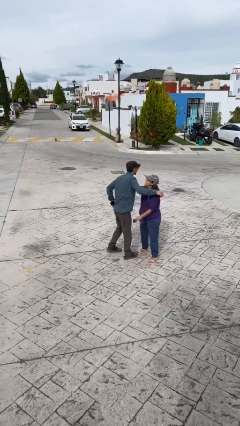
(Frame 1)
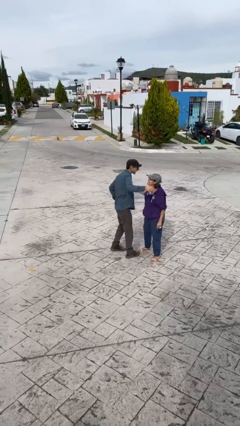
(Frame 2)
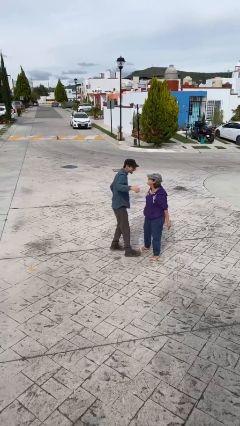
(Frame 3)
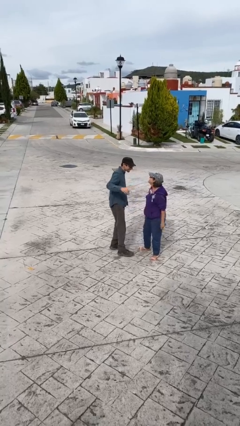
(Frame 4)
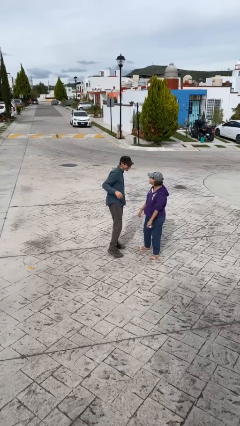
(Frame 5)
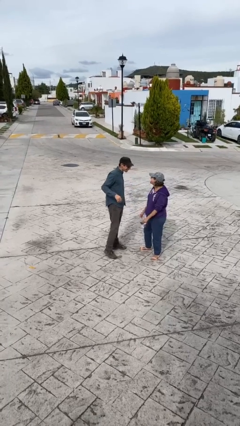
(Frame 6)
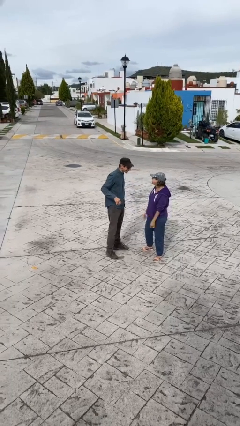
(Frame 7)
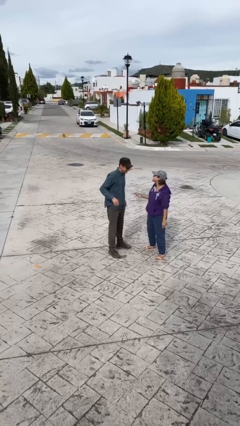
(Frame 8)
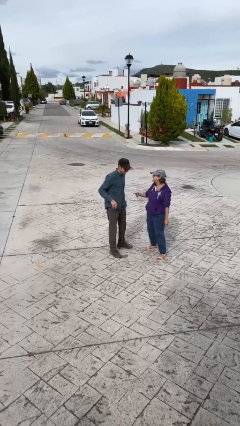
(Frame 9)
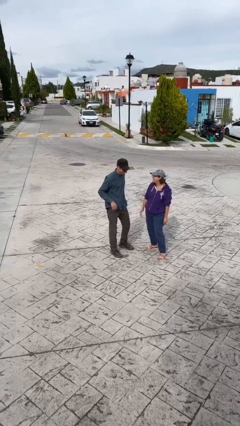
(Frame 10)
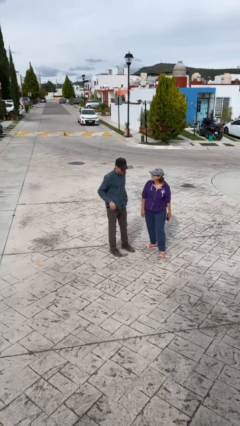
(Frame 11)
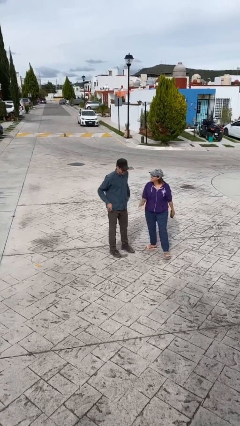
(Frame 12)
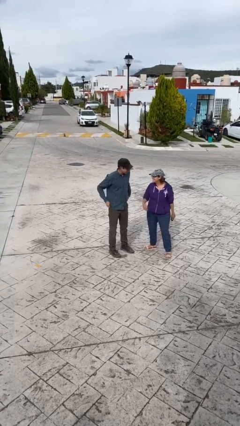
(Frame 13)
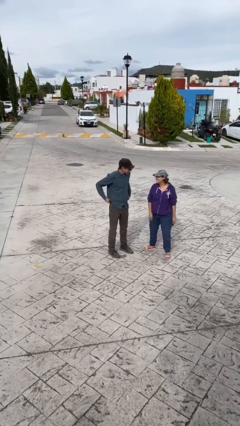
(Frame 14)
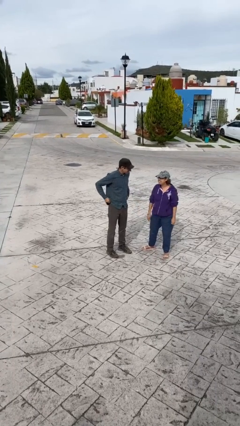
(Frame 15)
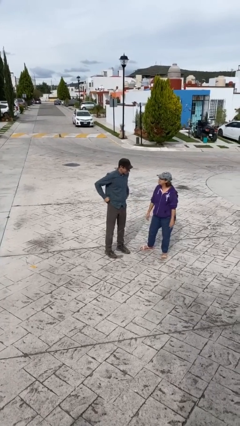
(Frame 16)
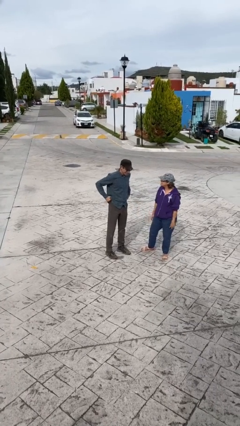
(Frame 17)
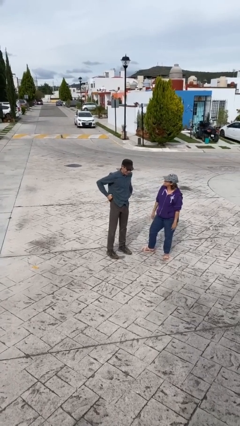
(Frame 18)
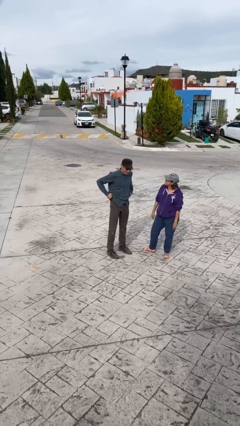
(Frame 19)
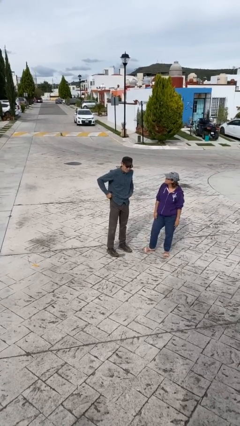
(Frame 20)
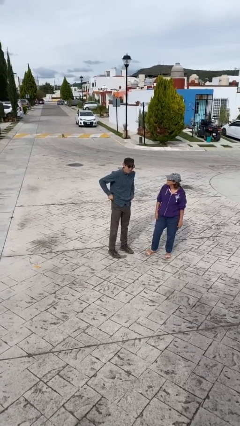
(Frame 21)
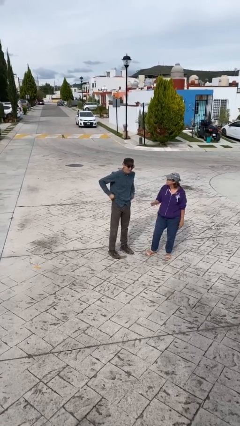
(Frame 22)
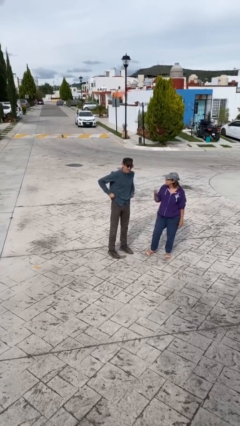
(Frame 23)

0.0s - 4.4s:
person talks to person

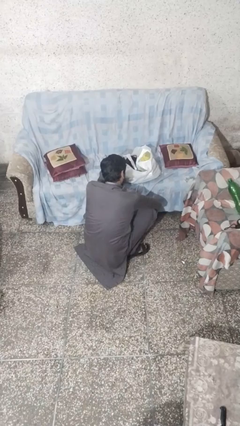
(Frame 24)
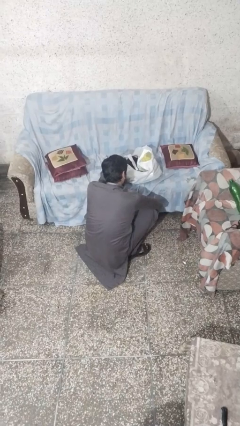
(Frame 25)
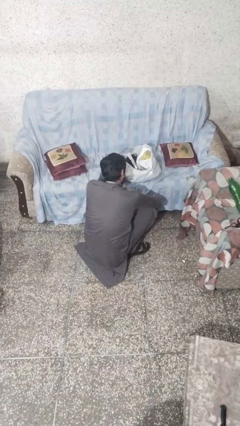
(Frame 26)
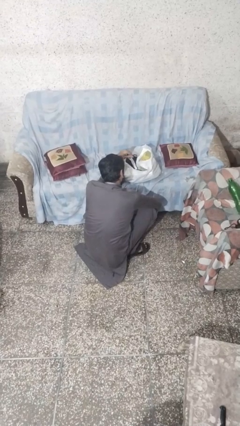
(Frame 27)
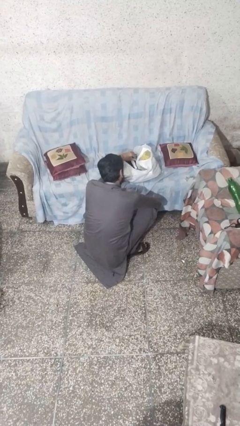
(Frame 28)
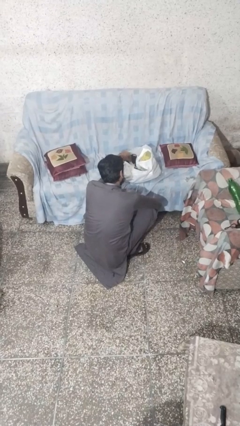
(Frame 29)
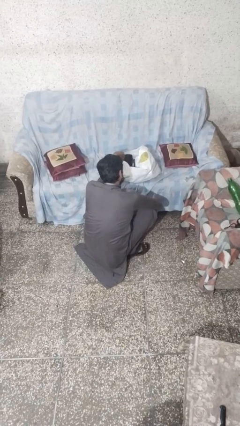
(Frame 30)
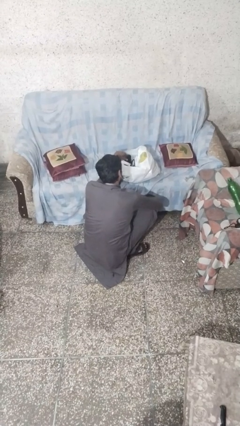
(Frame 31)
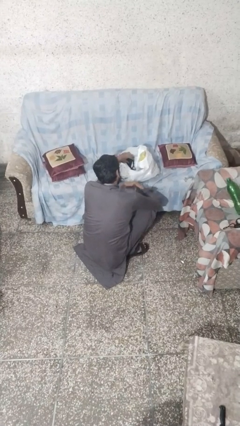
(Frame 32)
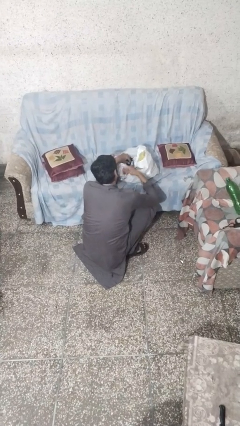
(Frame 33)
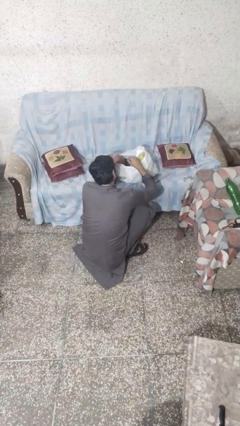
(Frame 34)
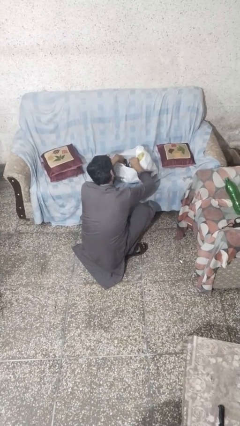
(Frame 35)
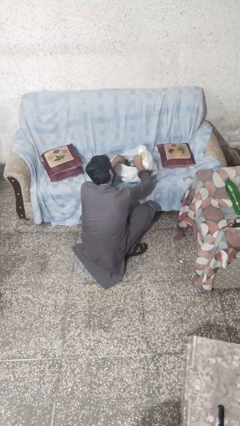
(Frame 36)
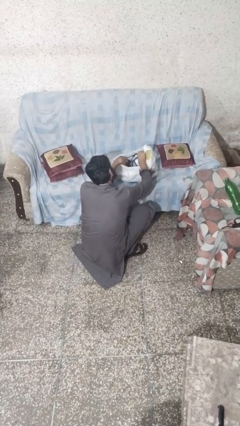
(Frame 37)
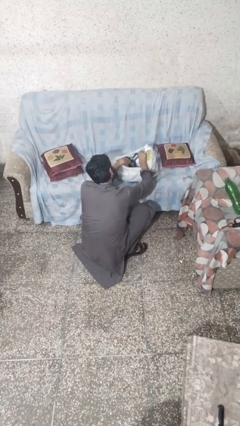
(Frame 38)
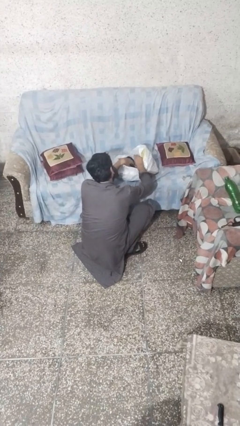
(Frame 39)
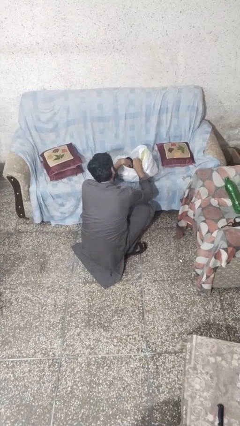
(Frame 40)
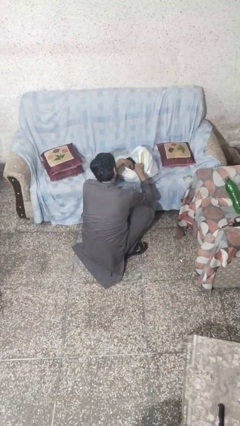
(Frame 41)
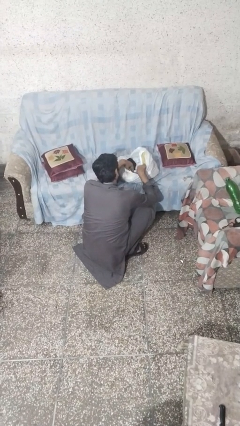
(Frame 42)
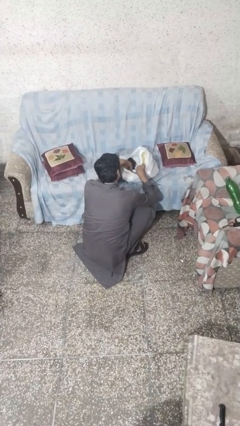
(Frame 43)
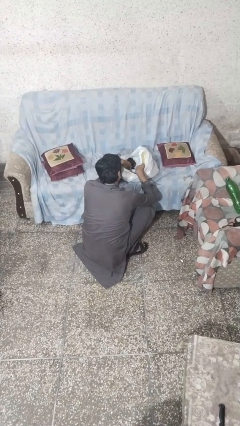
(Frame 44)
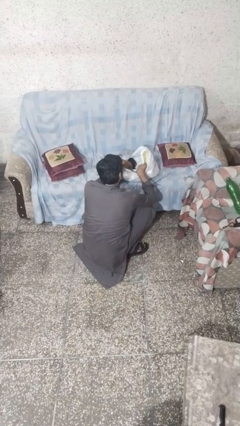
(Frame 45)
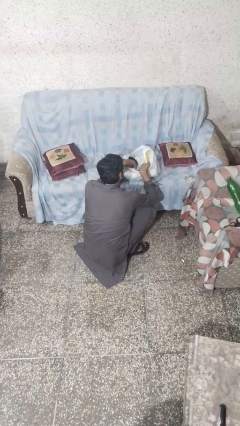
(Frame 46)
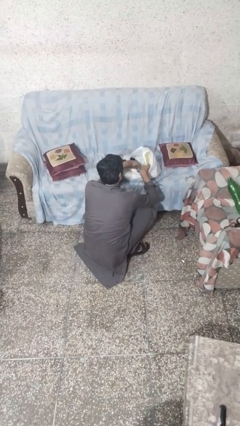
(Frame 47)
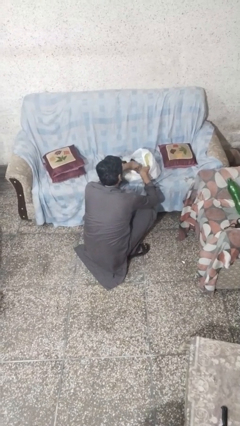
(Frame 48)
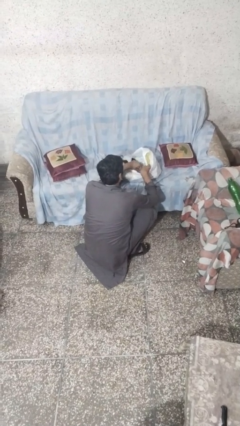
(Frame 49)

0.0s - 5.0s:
person searches in bag

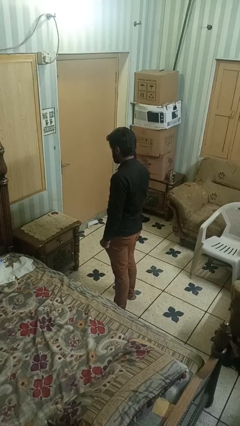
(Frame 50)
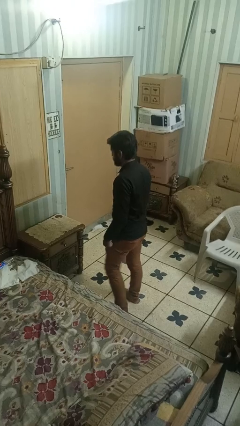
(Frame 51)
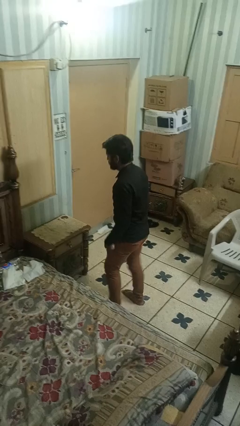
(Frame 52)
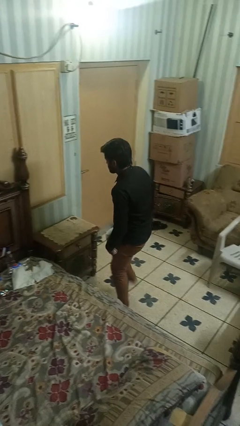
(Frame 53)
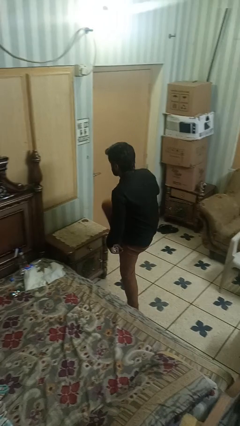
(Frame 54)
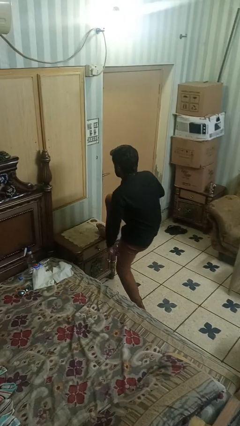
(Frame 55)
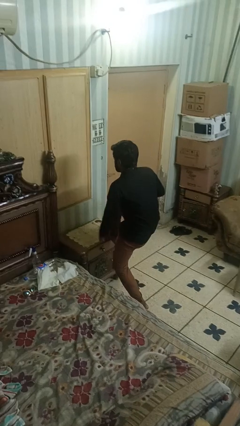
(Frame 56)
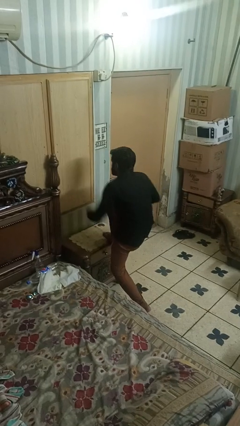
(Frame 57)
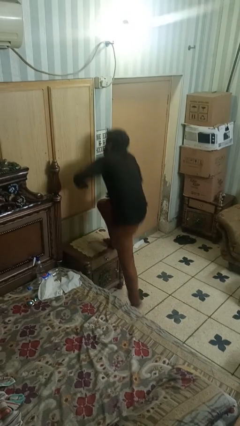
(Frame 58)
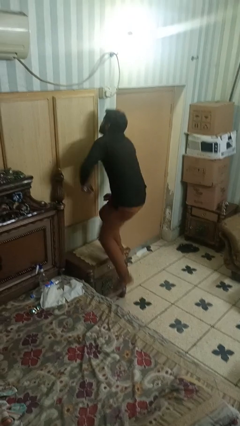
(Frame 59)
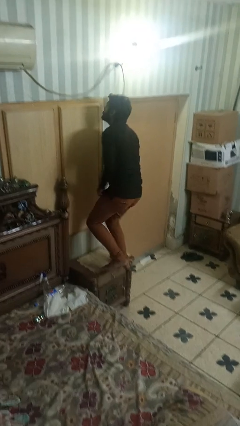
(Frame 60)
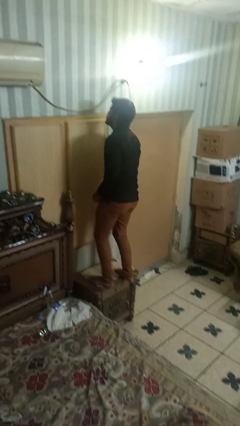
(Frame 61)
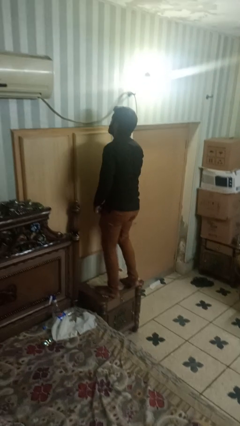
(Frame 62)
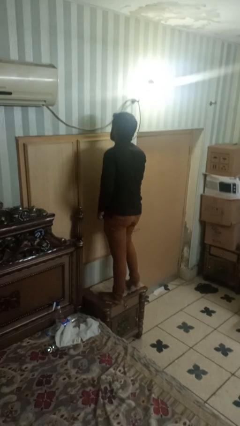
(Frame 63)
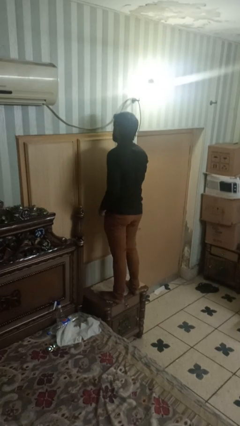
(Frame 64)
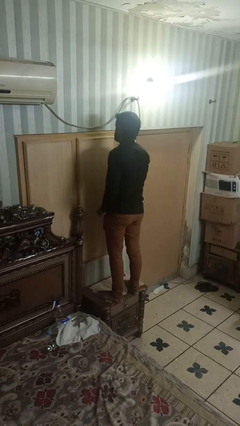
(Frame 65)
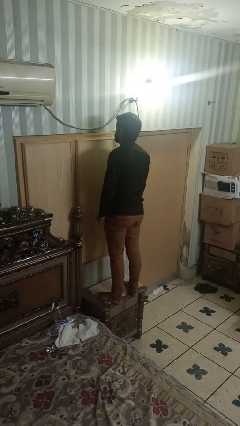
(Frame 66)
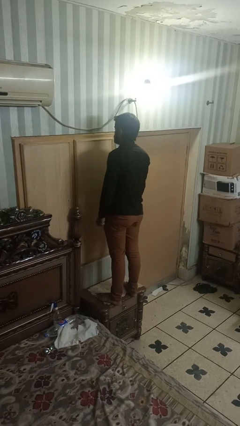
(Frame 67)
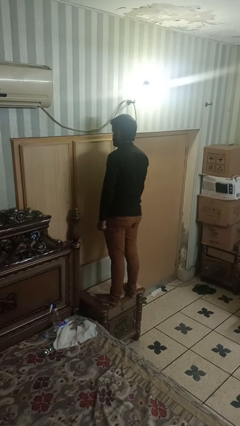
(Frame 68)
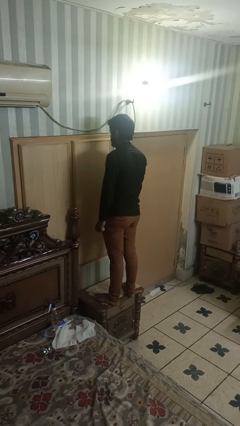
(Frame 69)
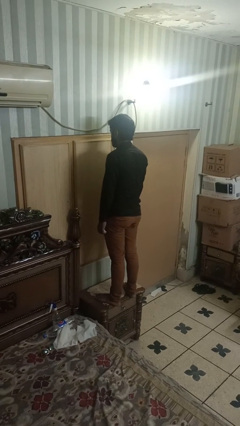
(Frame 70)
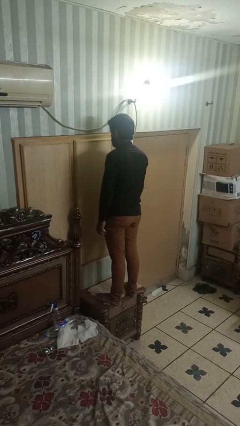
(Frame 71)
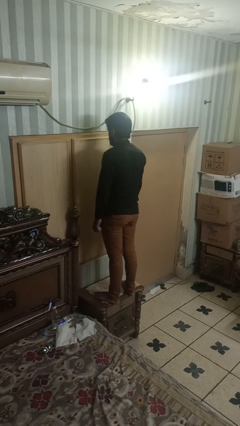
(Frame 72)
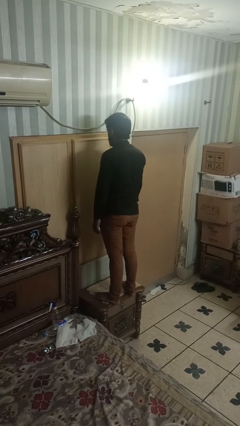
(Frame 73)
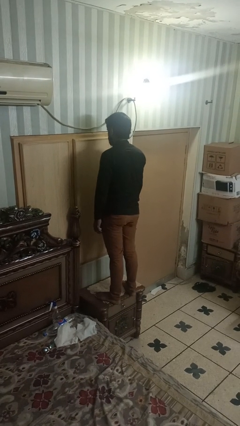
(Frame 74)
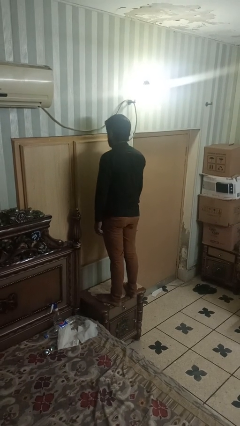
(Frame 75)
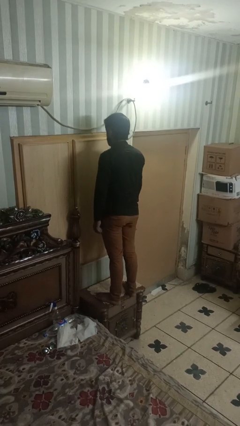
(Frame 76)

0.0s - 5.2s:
person climbs on table

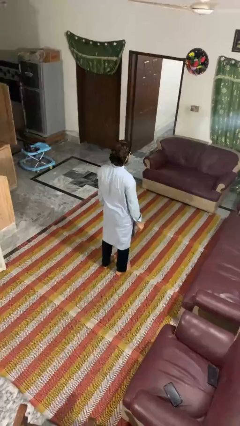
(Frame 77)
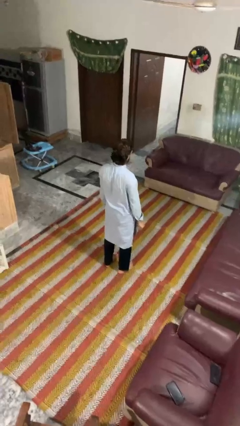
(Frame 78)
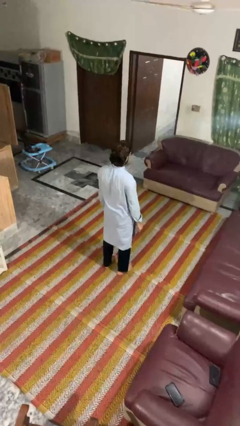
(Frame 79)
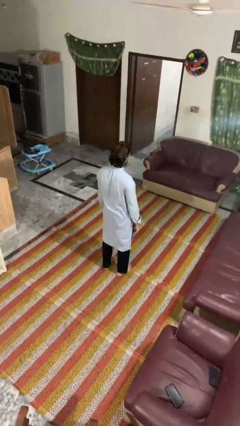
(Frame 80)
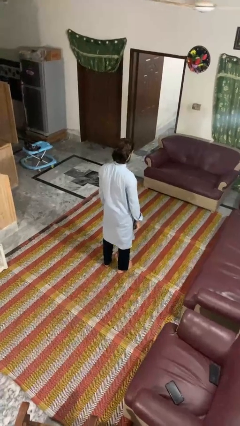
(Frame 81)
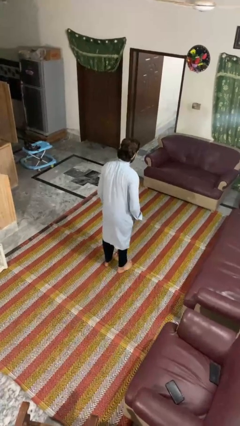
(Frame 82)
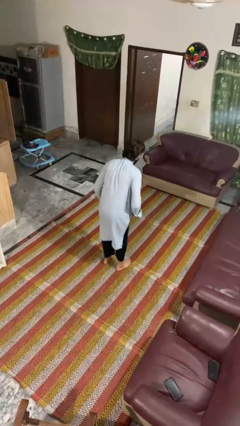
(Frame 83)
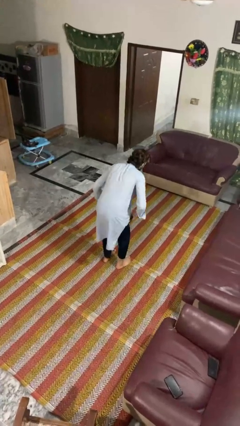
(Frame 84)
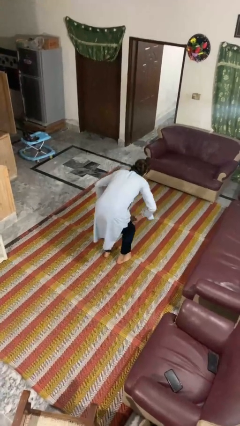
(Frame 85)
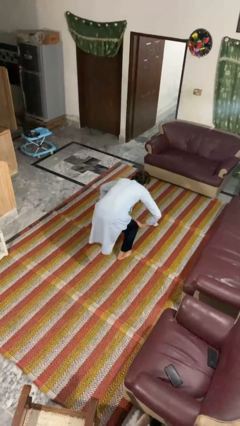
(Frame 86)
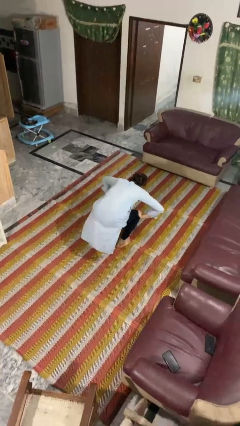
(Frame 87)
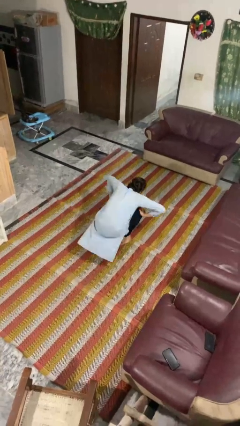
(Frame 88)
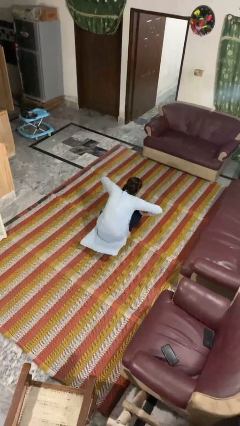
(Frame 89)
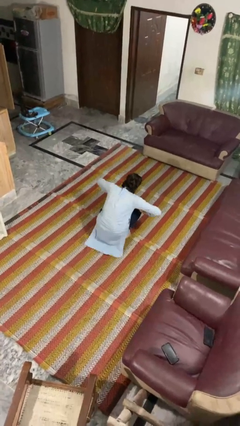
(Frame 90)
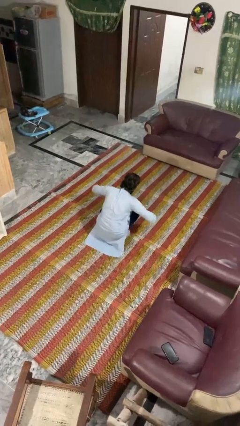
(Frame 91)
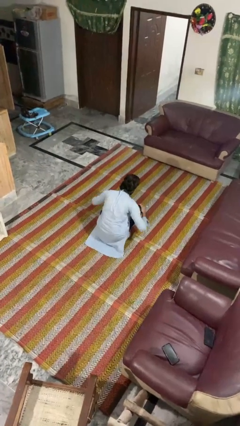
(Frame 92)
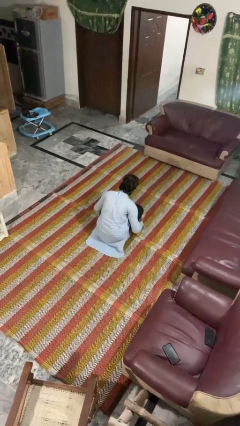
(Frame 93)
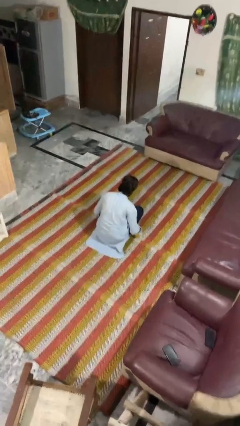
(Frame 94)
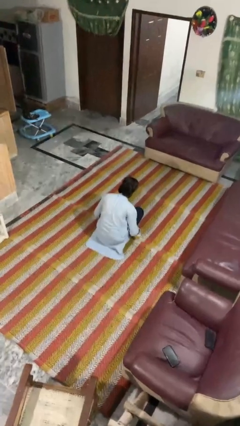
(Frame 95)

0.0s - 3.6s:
person squats
